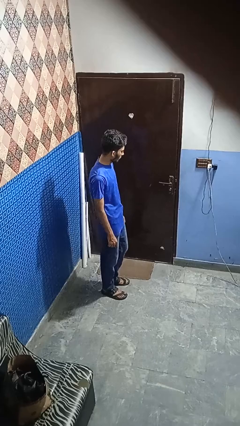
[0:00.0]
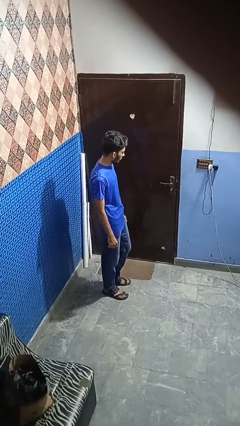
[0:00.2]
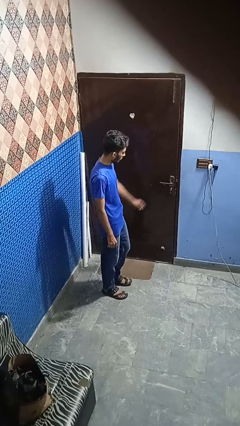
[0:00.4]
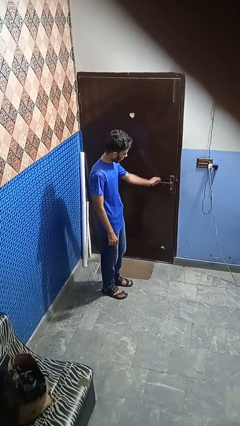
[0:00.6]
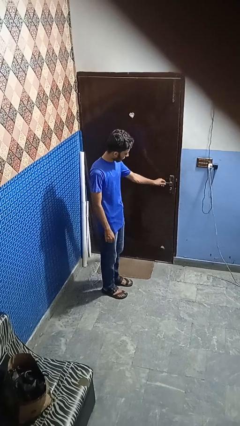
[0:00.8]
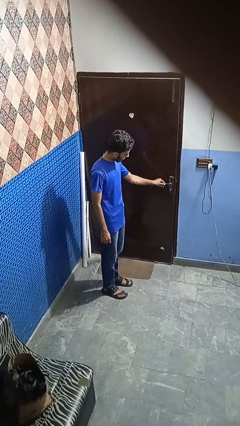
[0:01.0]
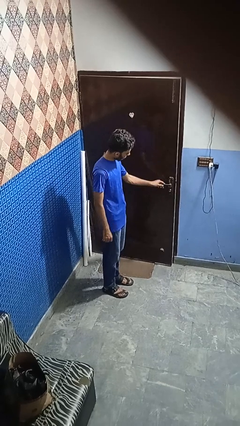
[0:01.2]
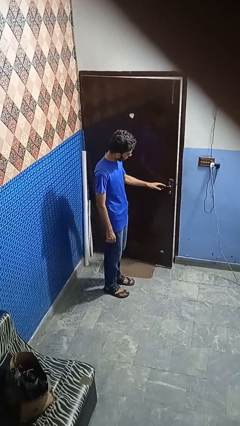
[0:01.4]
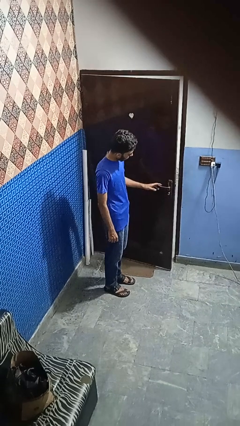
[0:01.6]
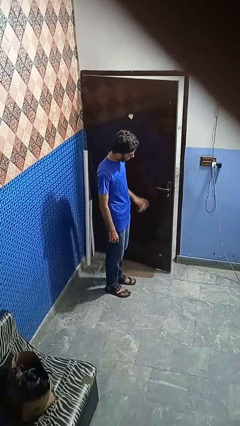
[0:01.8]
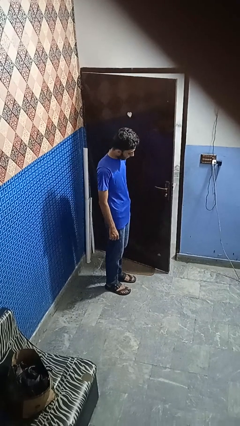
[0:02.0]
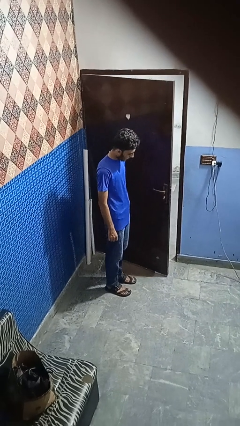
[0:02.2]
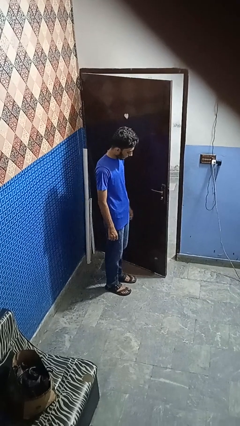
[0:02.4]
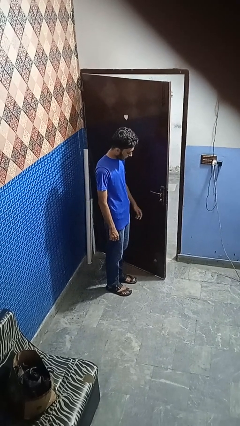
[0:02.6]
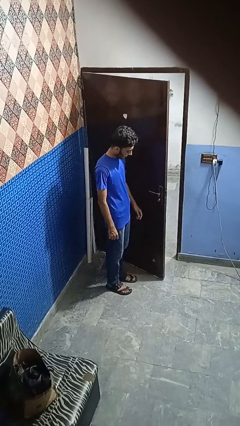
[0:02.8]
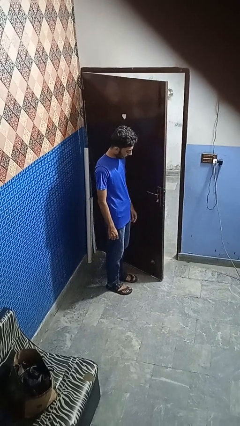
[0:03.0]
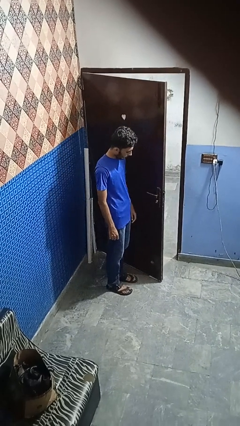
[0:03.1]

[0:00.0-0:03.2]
person opens facility door

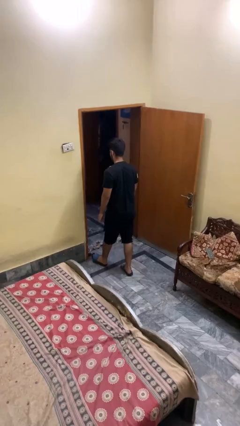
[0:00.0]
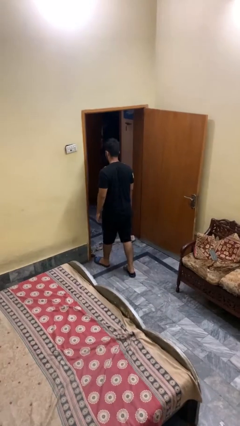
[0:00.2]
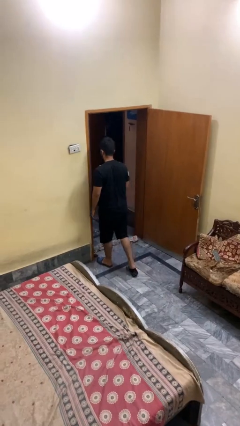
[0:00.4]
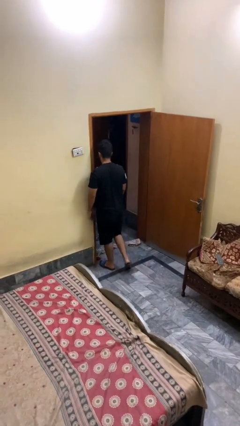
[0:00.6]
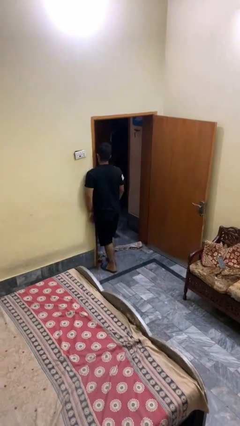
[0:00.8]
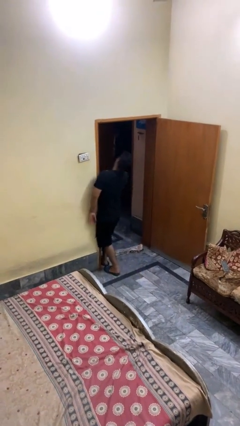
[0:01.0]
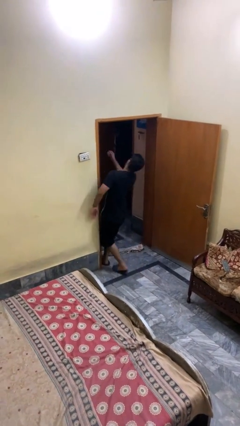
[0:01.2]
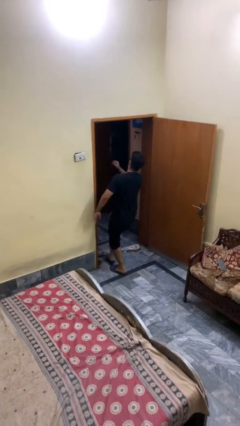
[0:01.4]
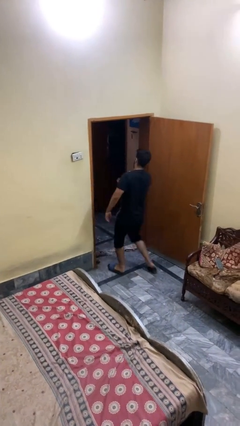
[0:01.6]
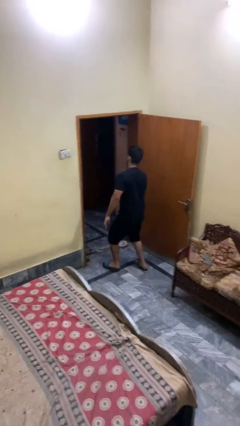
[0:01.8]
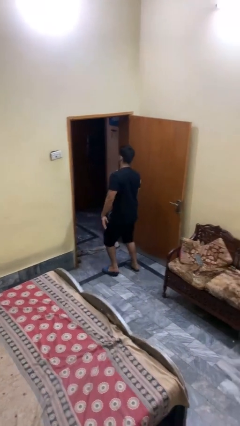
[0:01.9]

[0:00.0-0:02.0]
person bumps into wall

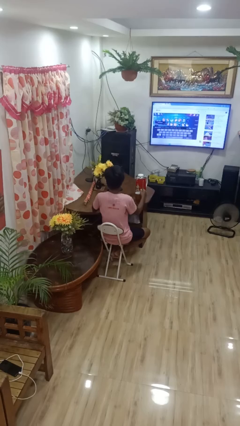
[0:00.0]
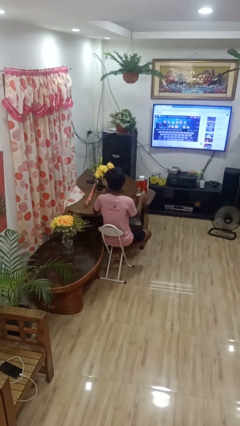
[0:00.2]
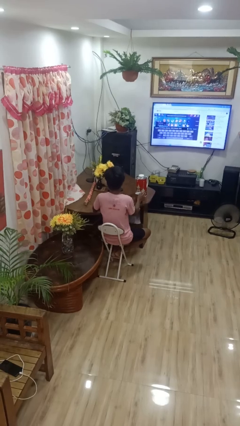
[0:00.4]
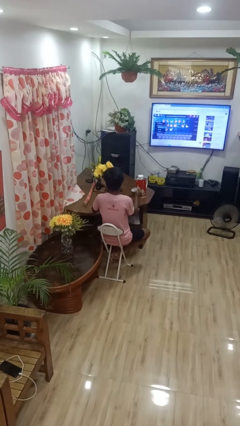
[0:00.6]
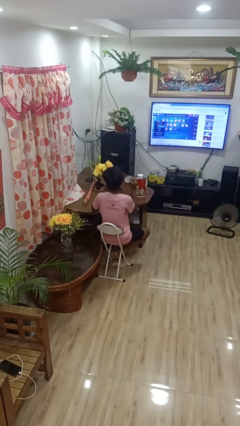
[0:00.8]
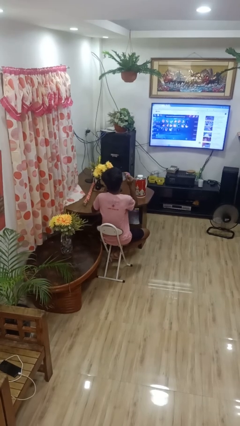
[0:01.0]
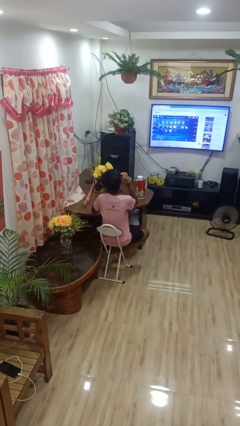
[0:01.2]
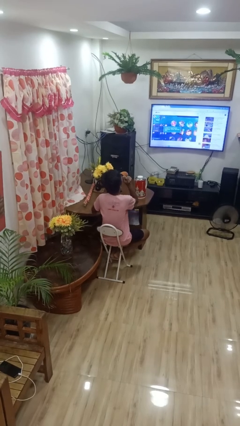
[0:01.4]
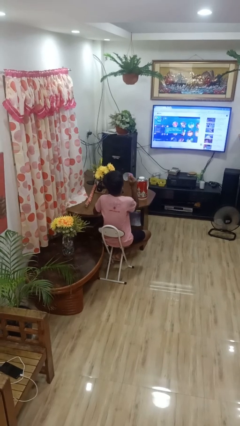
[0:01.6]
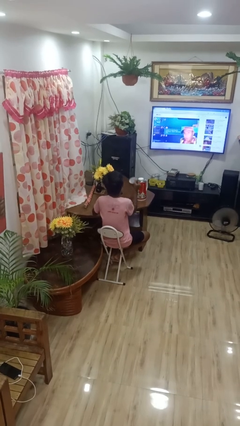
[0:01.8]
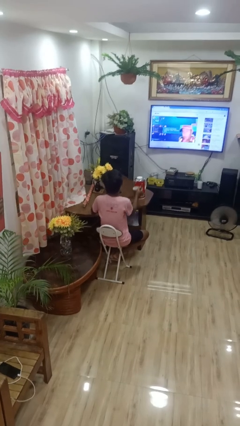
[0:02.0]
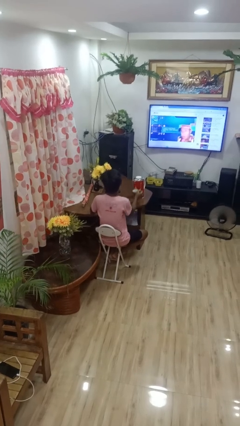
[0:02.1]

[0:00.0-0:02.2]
person drinks from mug

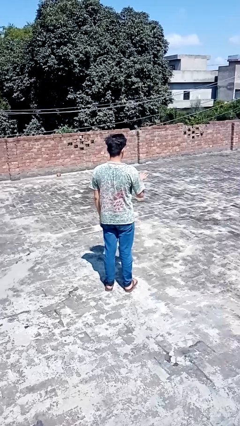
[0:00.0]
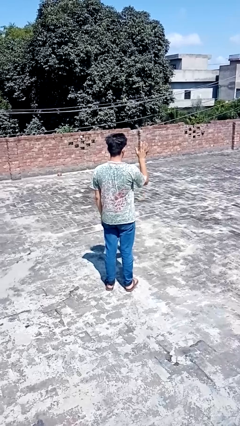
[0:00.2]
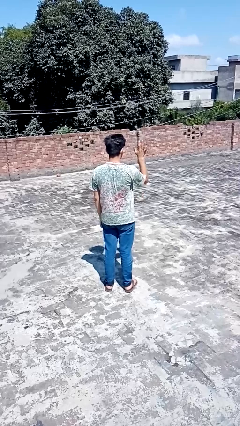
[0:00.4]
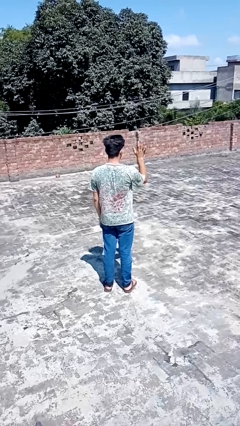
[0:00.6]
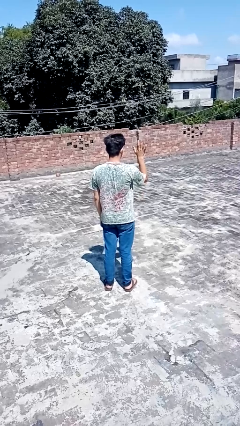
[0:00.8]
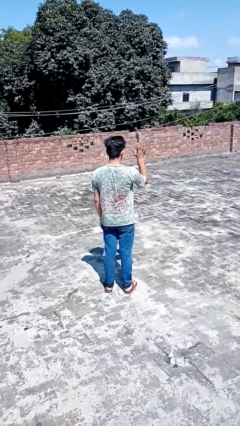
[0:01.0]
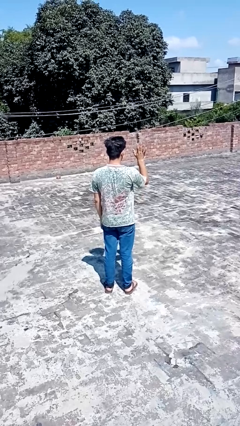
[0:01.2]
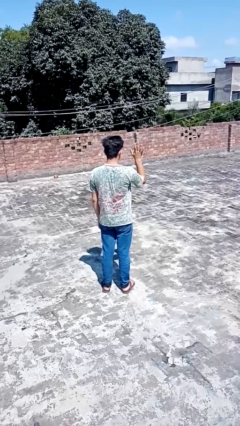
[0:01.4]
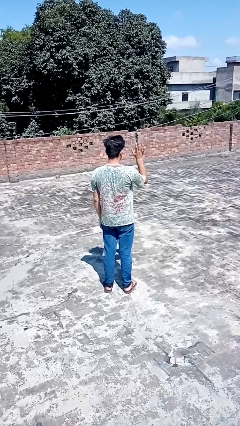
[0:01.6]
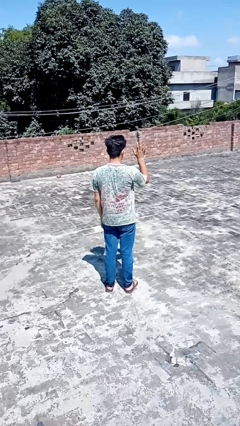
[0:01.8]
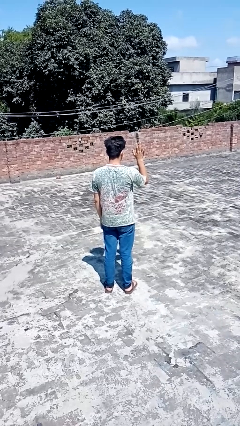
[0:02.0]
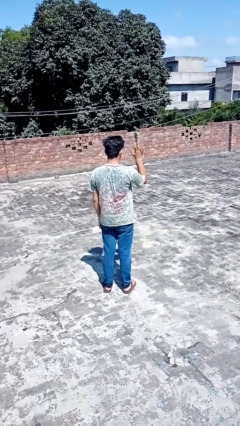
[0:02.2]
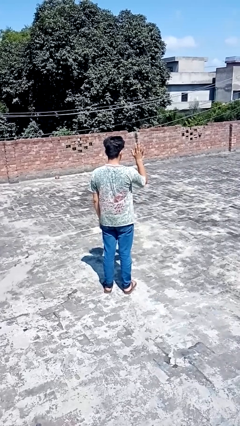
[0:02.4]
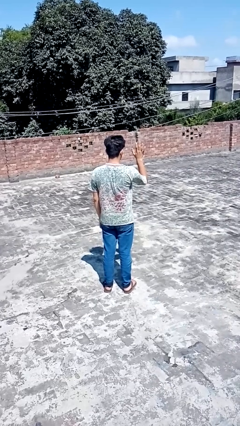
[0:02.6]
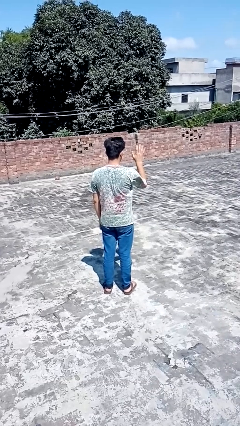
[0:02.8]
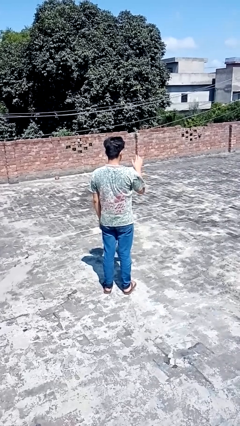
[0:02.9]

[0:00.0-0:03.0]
person gestures number five

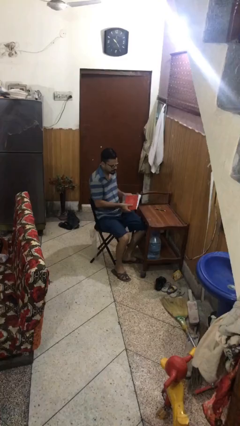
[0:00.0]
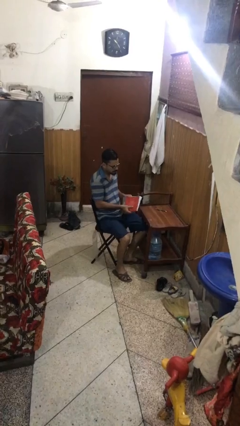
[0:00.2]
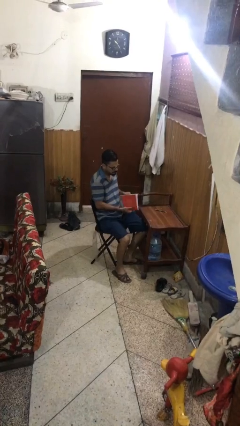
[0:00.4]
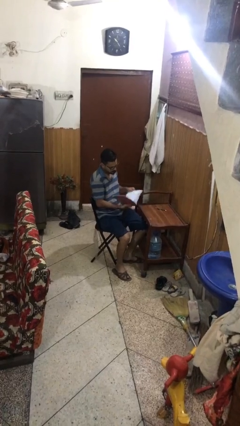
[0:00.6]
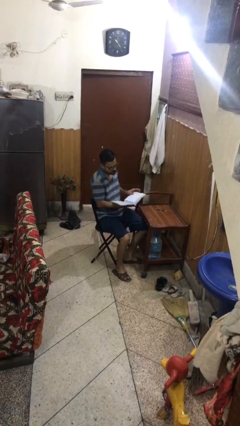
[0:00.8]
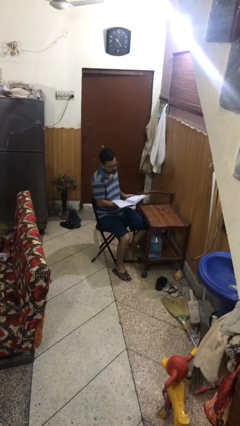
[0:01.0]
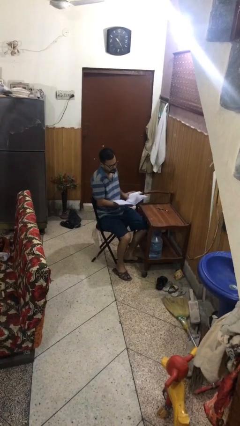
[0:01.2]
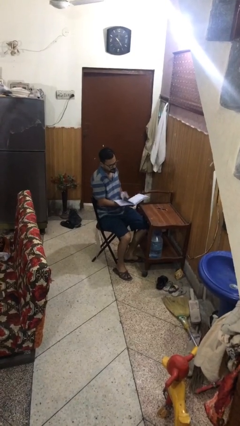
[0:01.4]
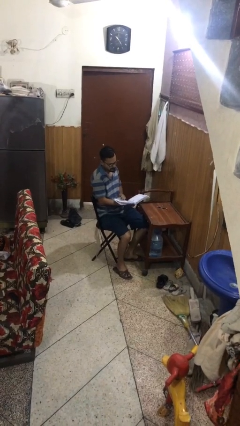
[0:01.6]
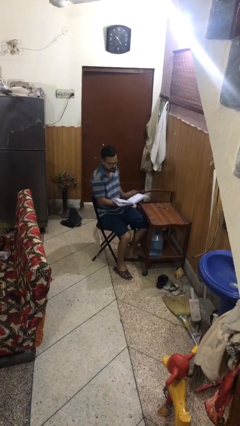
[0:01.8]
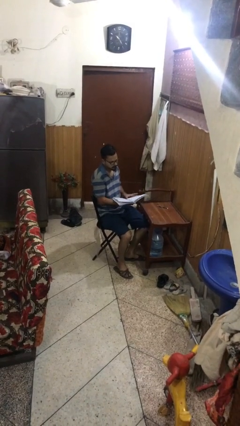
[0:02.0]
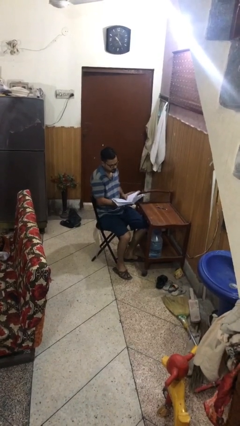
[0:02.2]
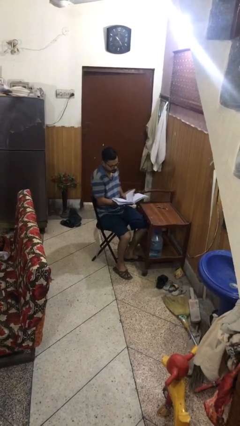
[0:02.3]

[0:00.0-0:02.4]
person reads document

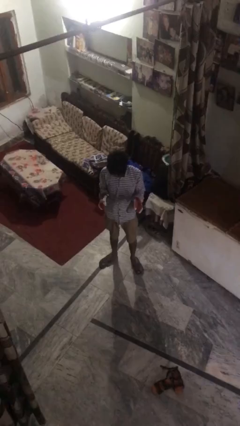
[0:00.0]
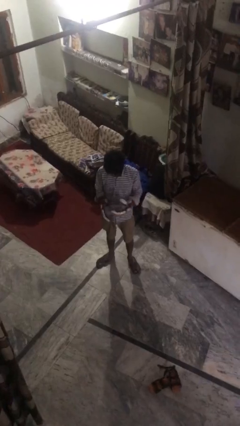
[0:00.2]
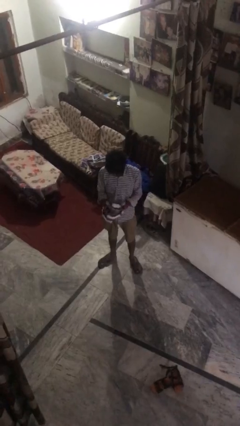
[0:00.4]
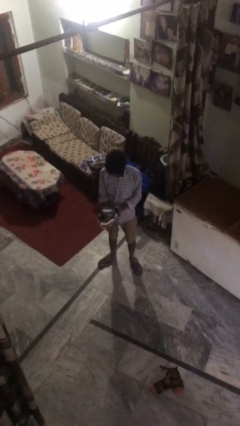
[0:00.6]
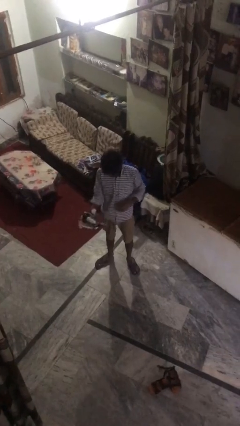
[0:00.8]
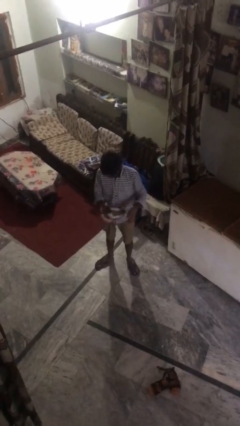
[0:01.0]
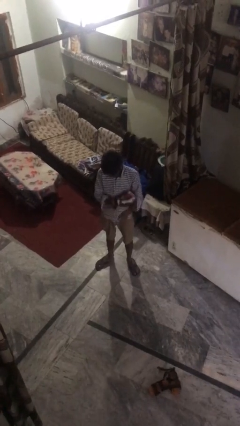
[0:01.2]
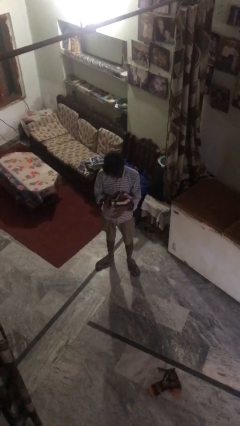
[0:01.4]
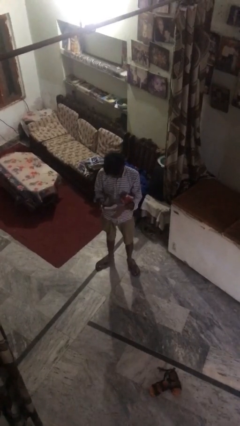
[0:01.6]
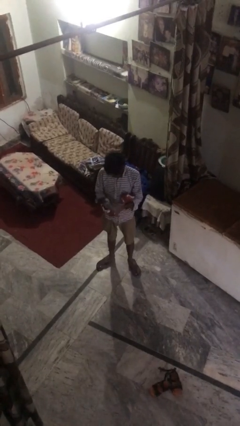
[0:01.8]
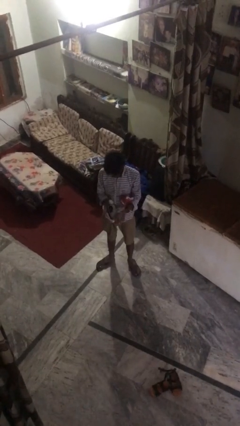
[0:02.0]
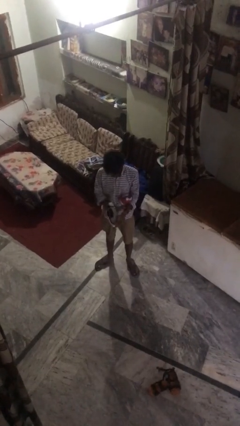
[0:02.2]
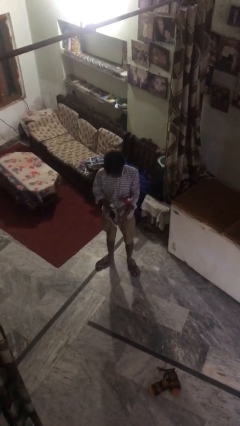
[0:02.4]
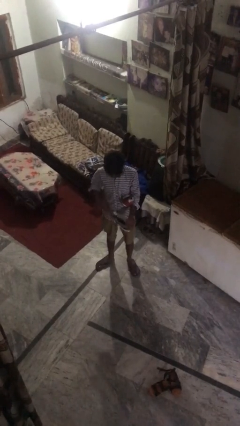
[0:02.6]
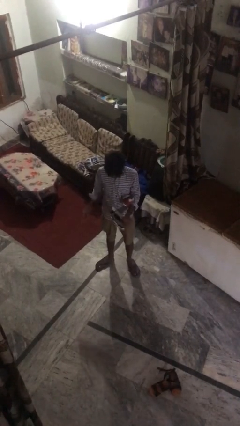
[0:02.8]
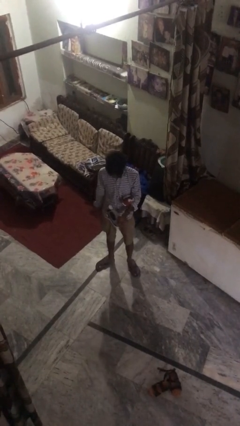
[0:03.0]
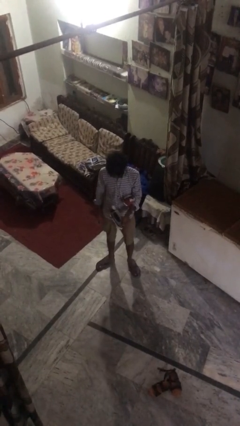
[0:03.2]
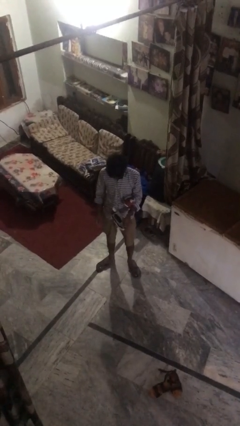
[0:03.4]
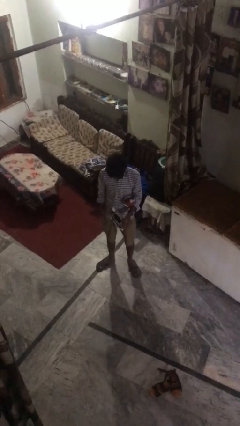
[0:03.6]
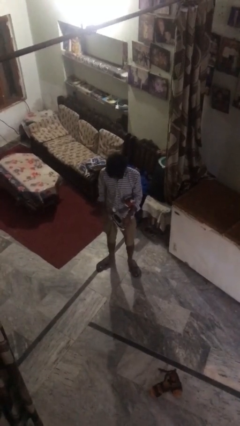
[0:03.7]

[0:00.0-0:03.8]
person takes off gloves

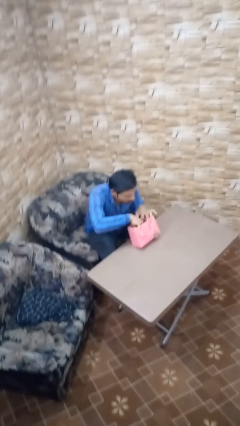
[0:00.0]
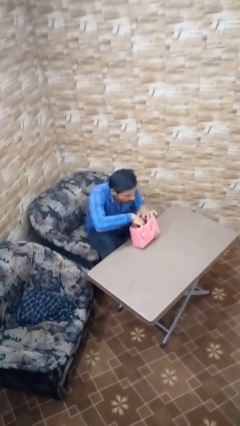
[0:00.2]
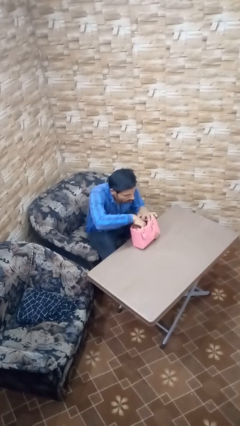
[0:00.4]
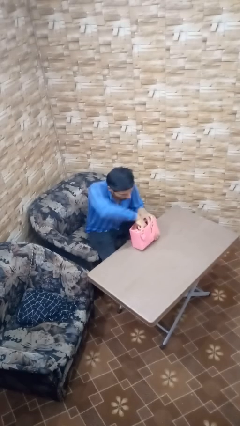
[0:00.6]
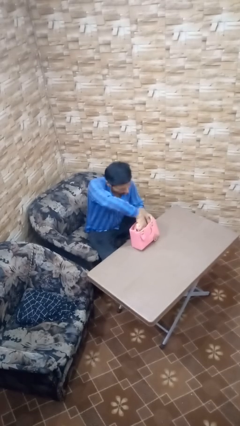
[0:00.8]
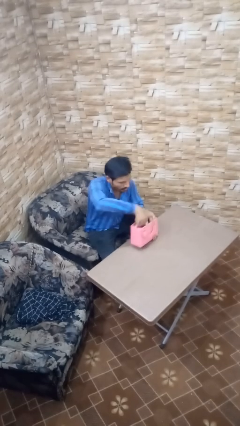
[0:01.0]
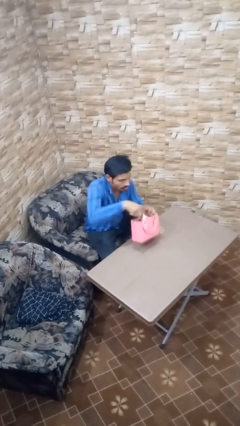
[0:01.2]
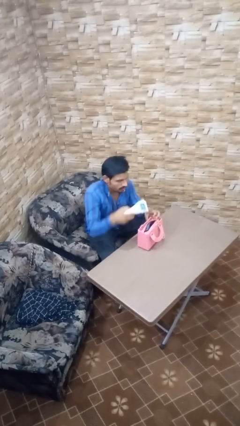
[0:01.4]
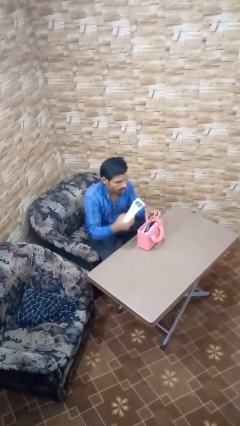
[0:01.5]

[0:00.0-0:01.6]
person takes object from purse
